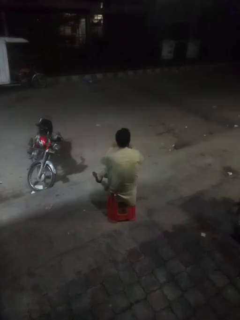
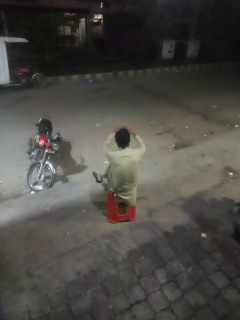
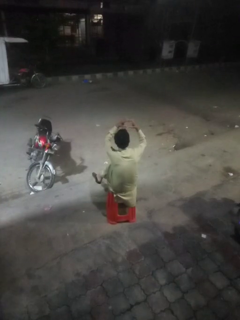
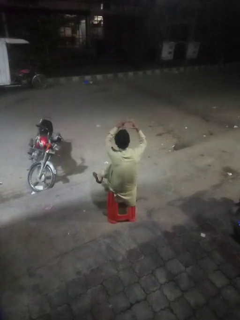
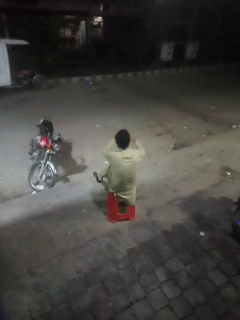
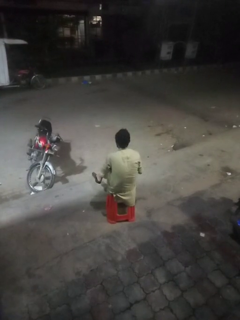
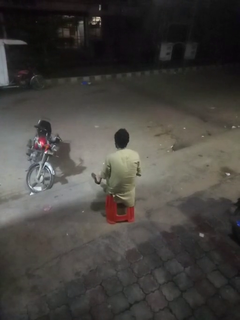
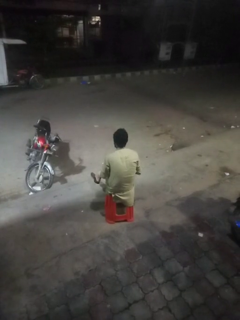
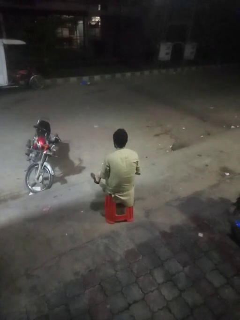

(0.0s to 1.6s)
person gestures heart

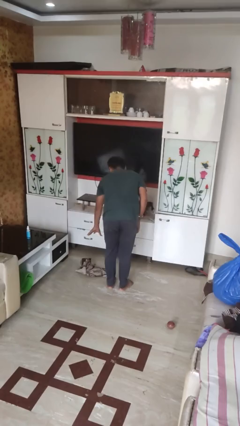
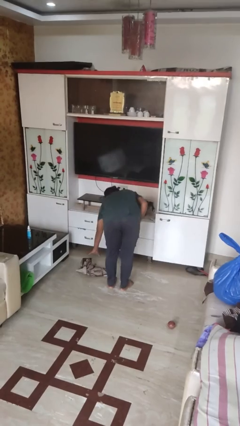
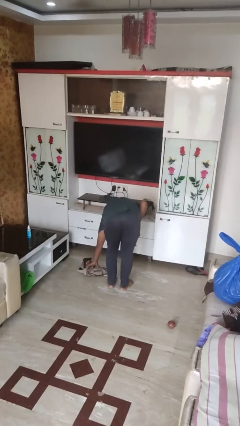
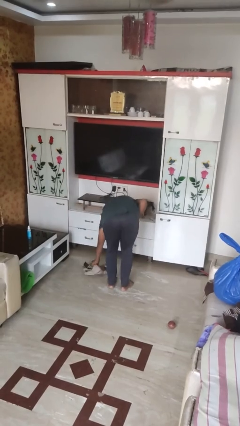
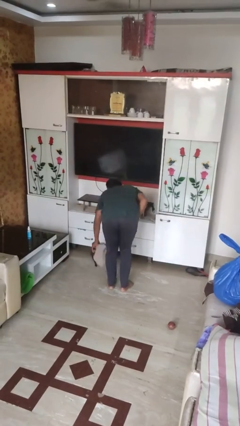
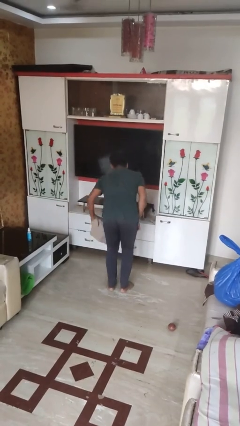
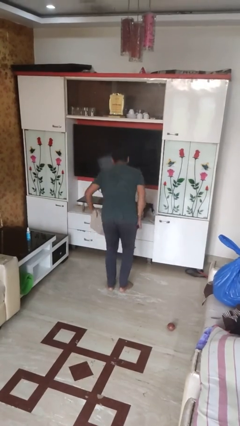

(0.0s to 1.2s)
person picks up object from floor

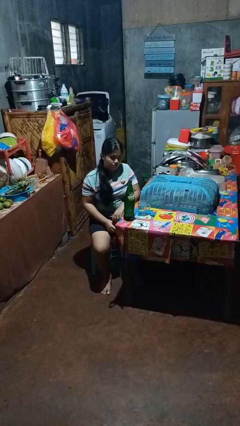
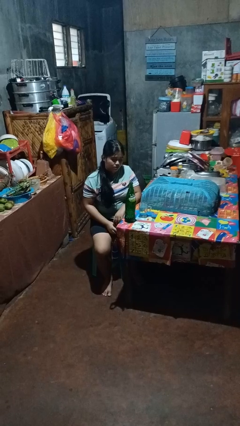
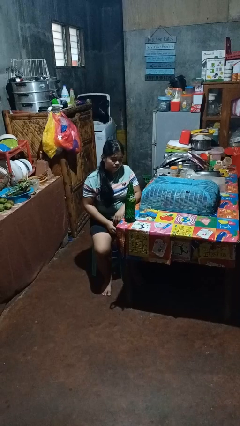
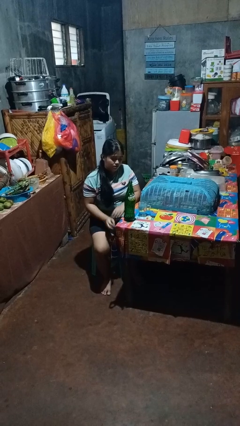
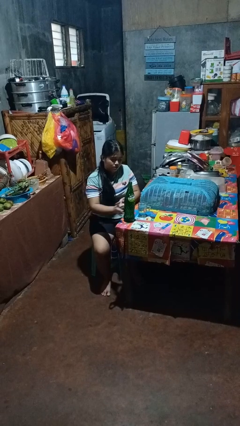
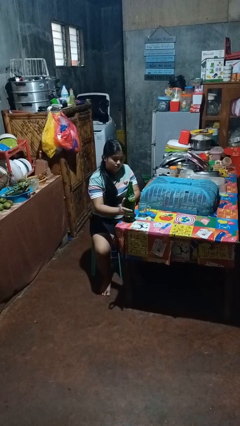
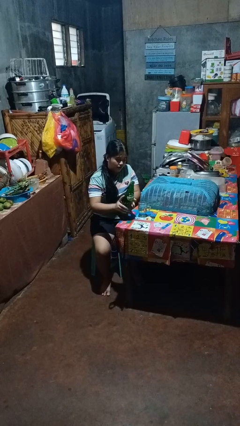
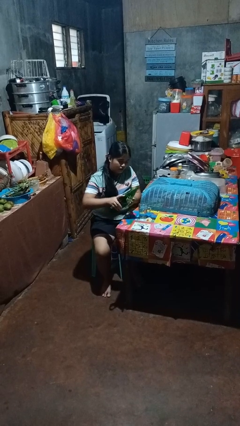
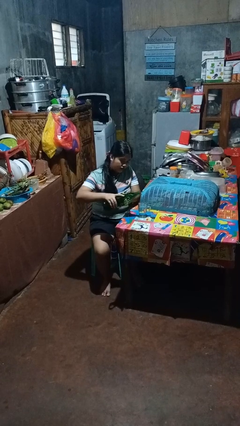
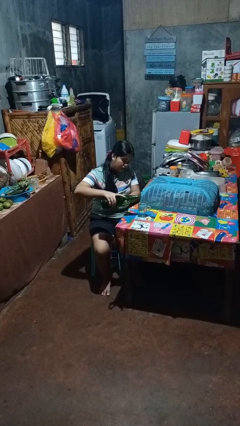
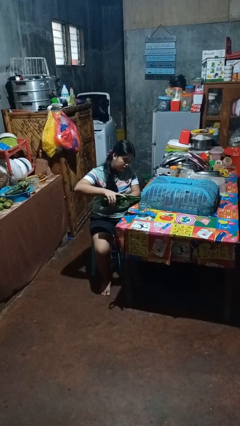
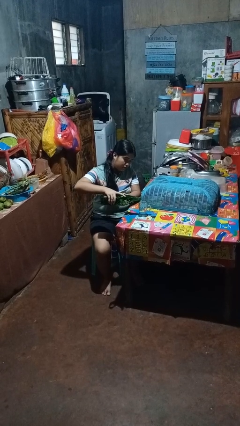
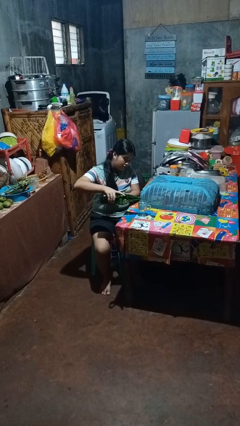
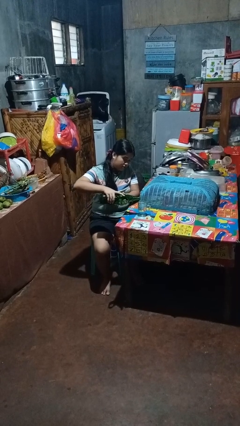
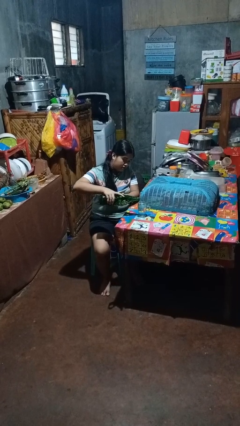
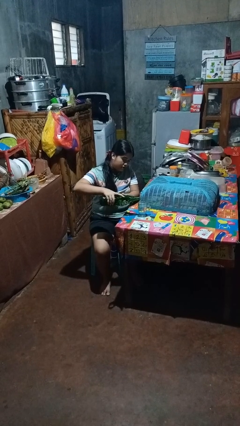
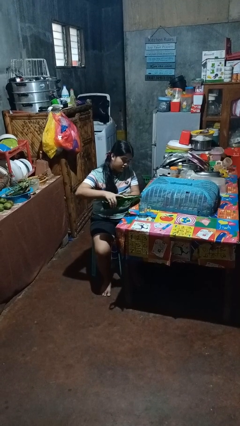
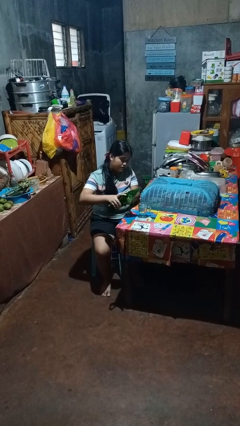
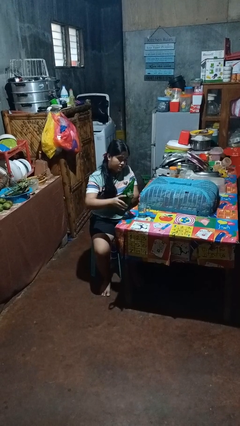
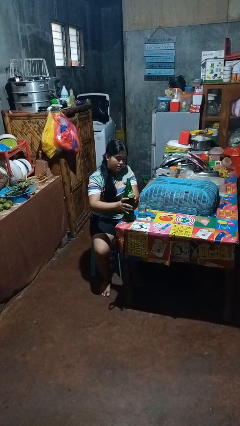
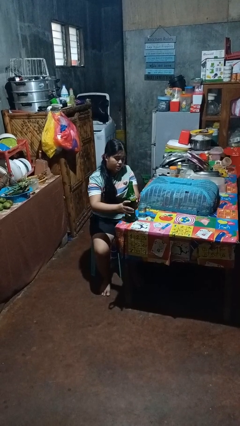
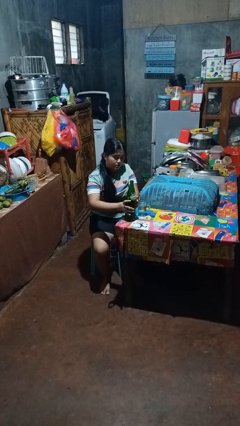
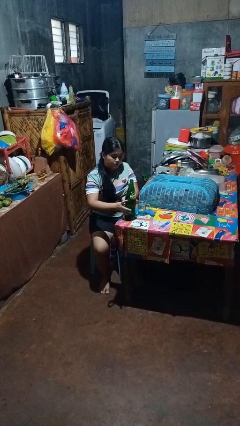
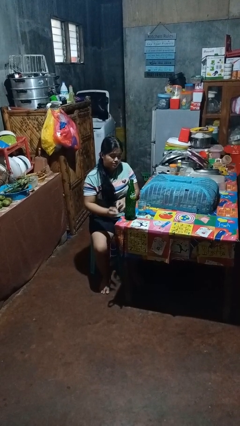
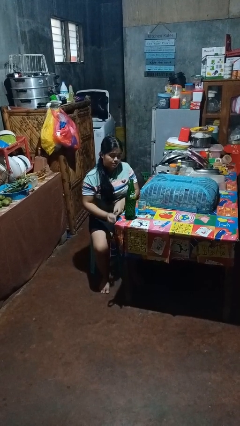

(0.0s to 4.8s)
person pours liquid into cup

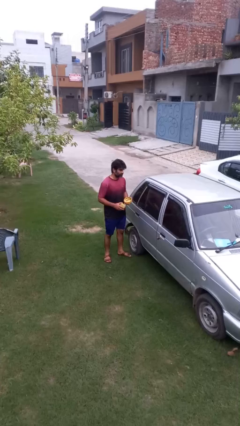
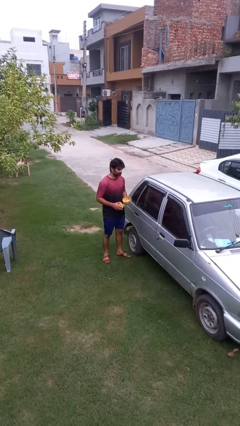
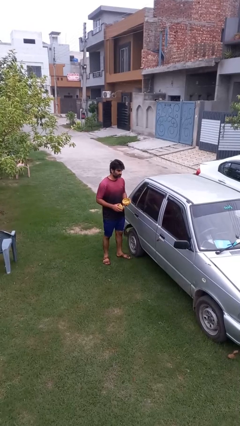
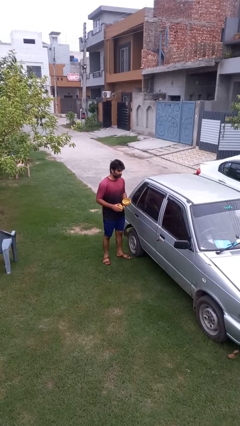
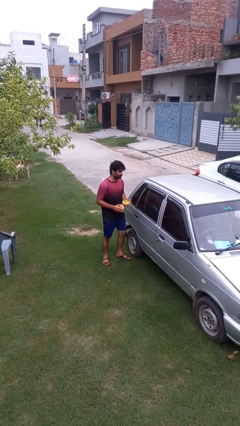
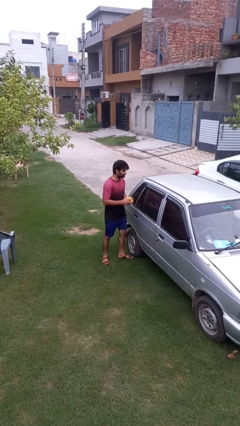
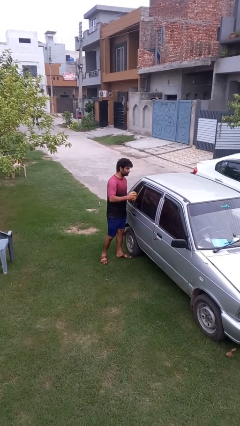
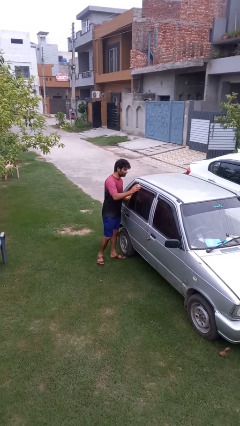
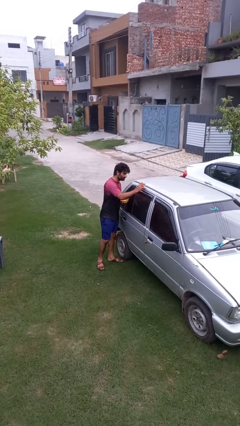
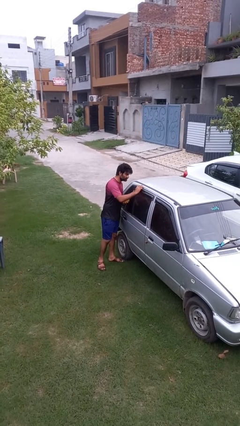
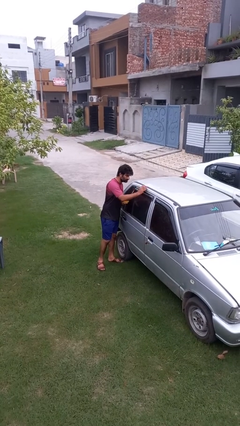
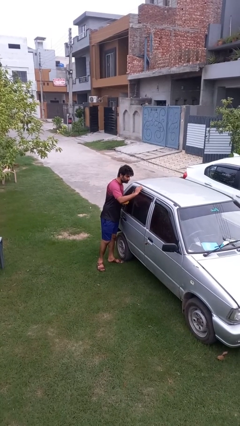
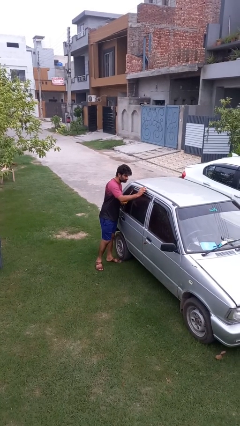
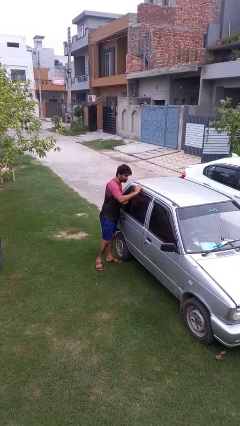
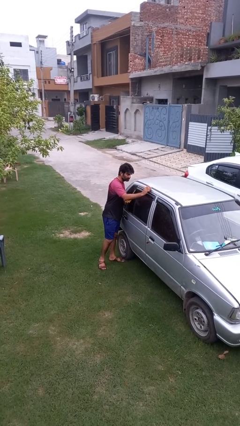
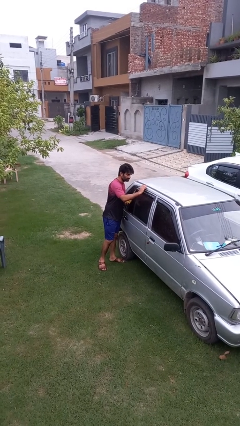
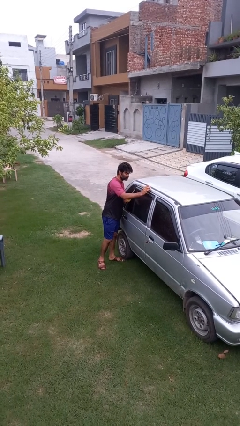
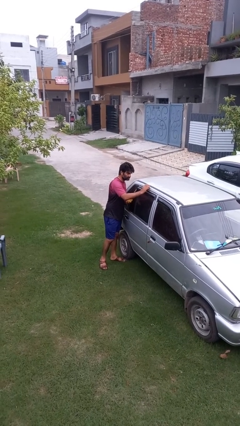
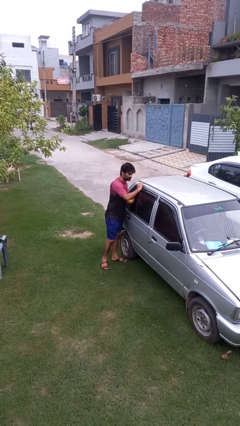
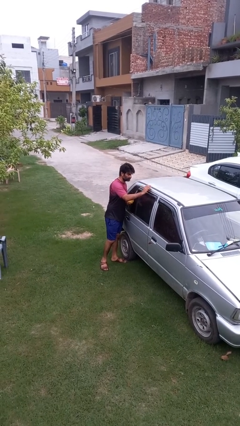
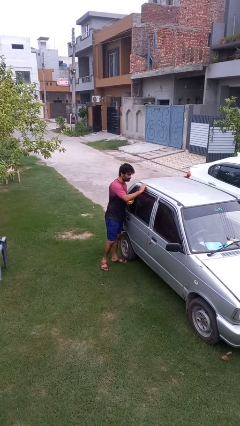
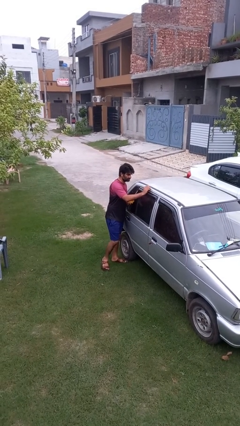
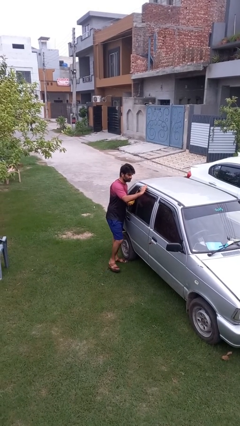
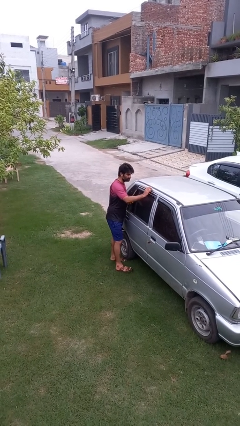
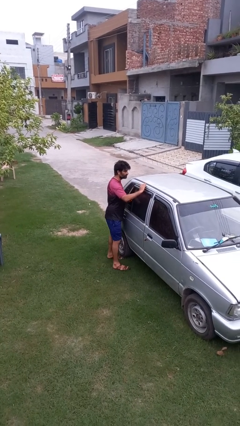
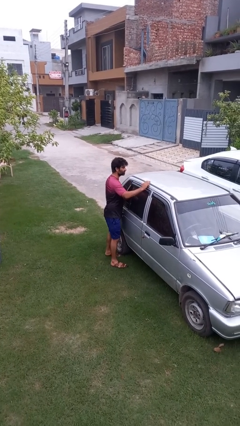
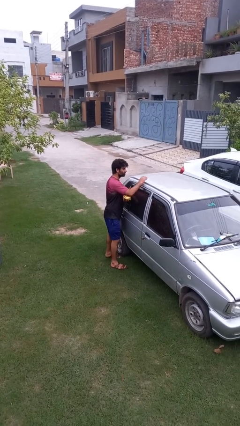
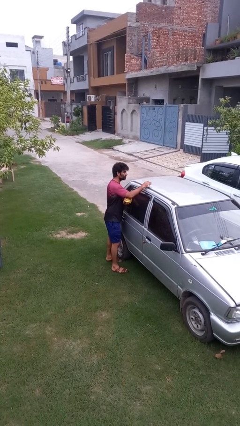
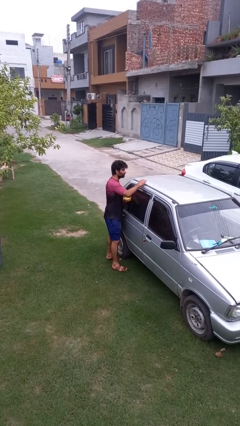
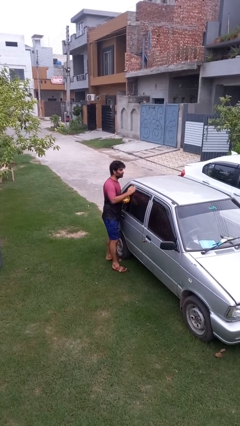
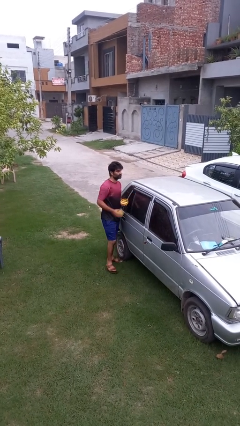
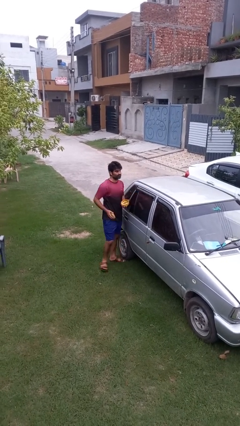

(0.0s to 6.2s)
person polishes car with rag

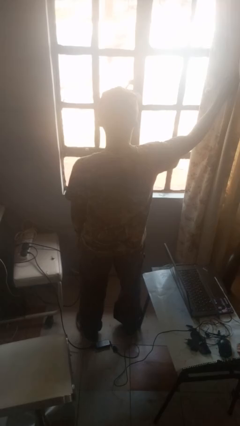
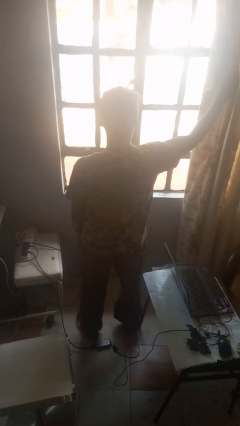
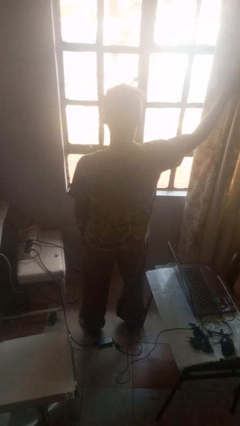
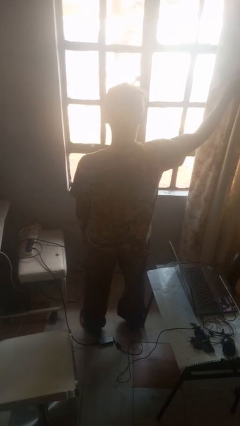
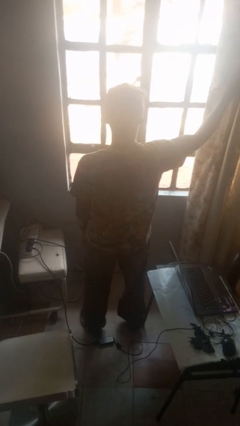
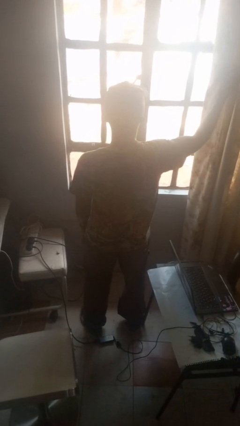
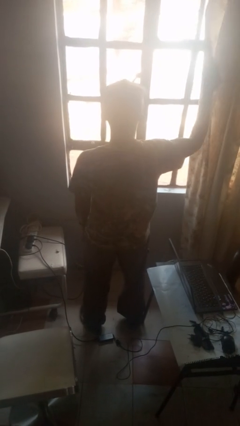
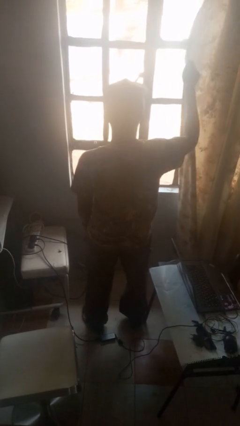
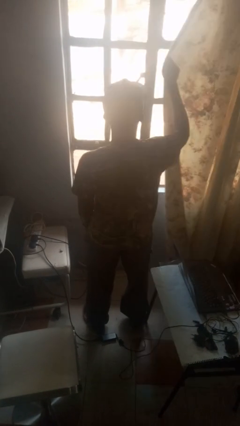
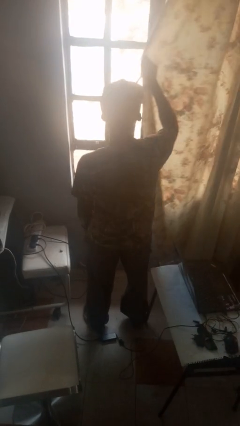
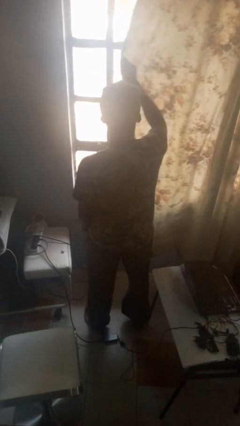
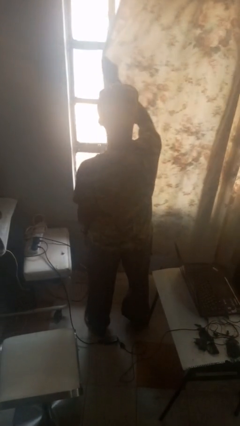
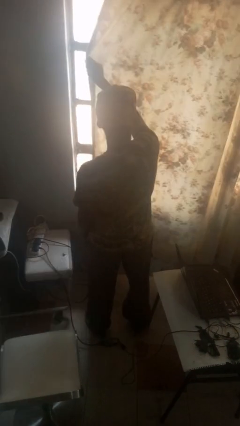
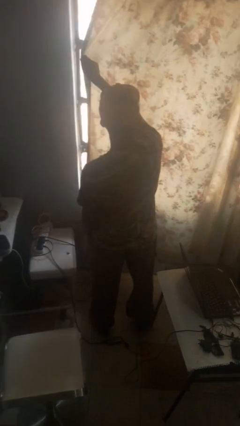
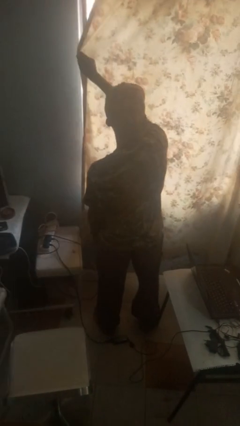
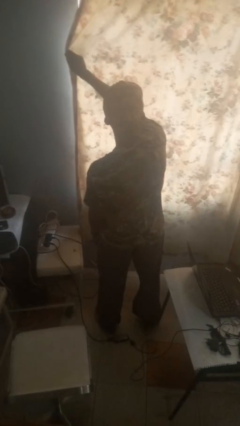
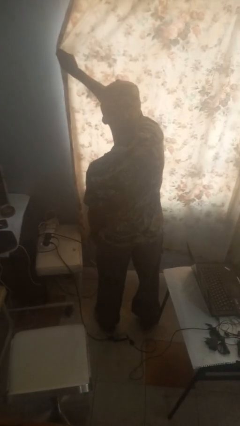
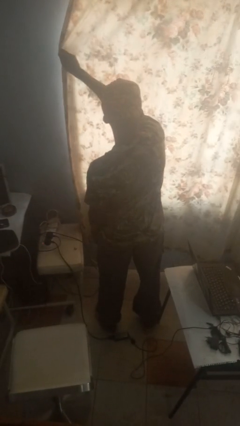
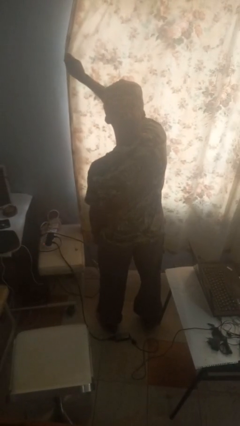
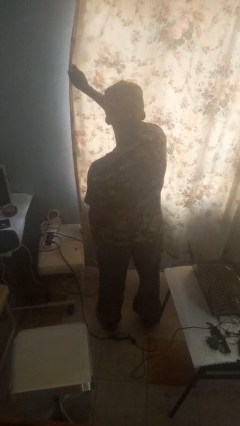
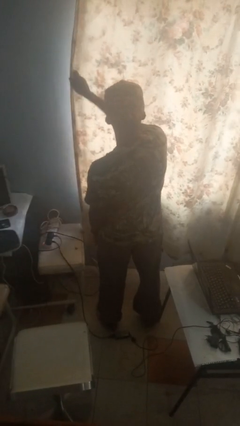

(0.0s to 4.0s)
person closes curtains
